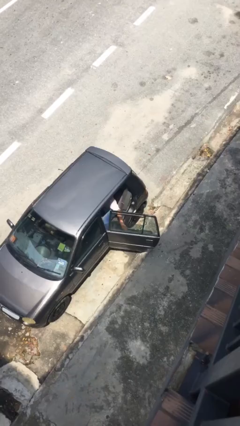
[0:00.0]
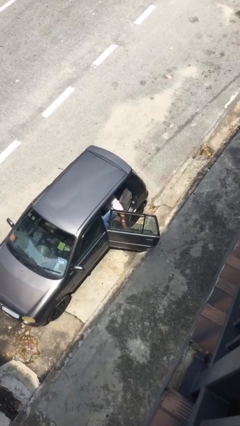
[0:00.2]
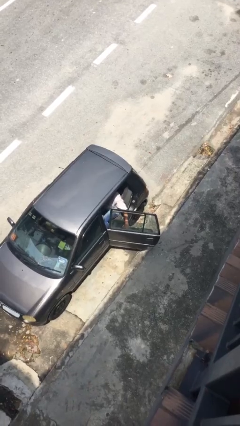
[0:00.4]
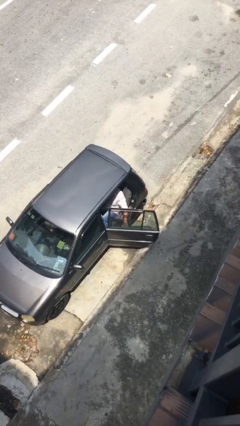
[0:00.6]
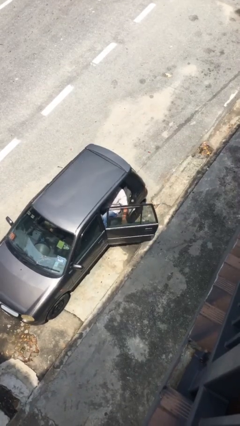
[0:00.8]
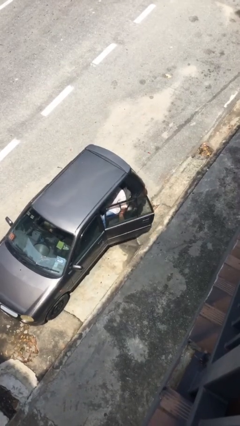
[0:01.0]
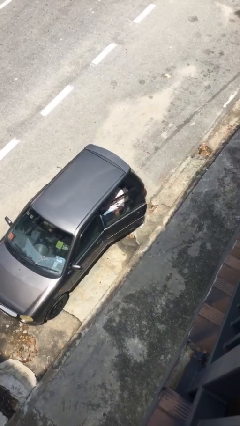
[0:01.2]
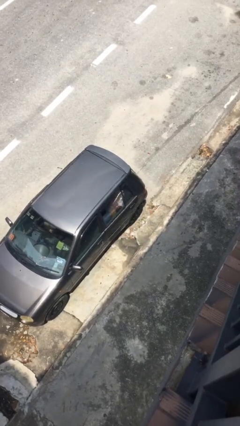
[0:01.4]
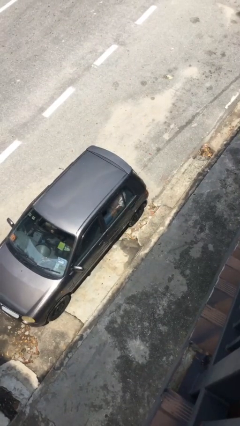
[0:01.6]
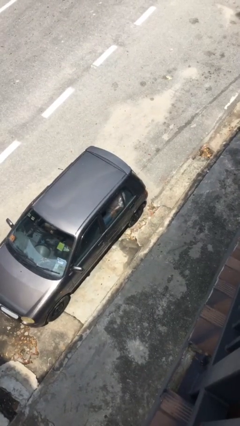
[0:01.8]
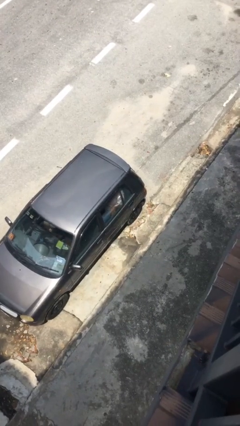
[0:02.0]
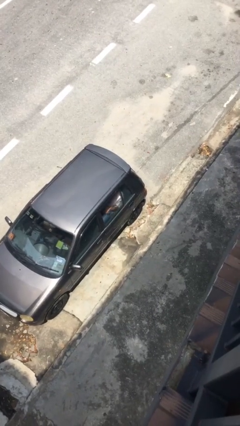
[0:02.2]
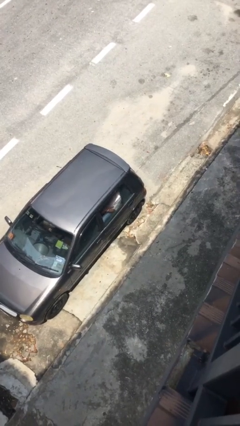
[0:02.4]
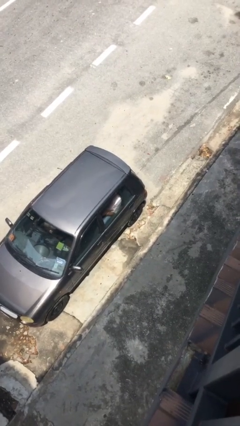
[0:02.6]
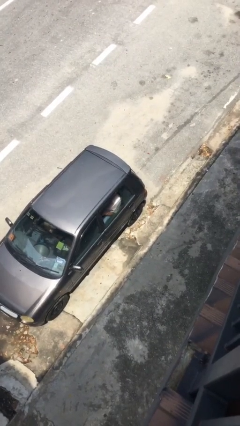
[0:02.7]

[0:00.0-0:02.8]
person closes car door

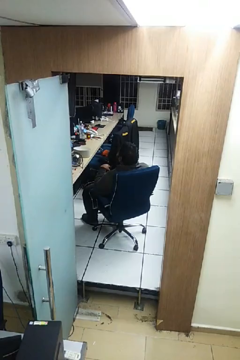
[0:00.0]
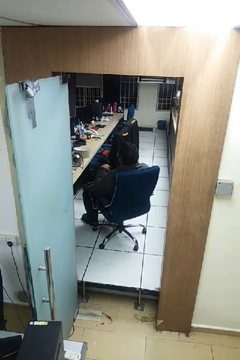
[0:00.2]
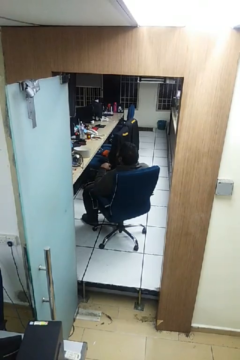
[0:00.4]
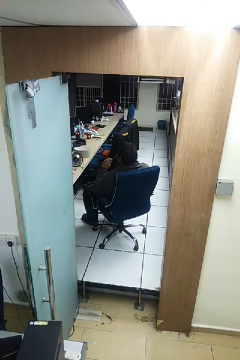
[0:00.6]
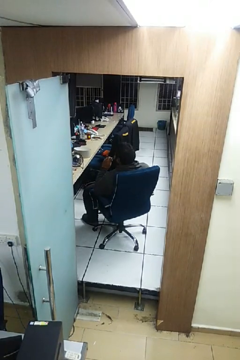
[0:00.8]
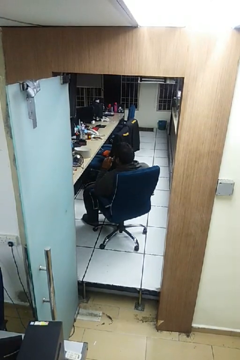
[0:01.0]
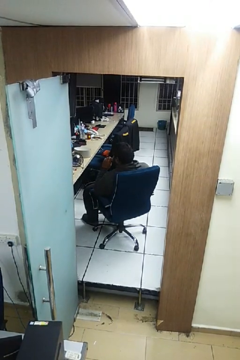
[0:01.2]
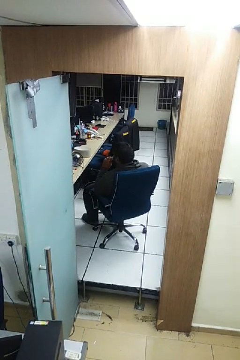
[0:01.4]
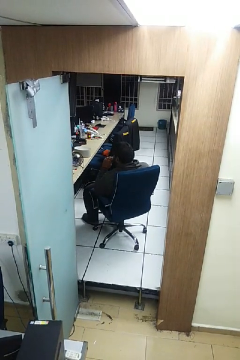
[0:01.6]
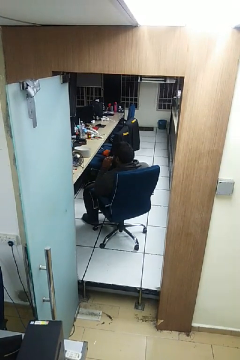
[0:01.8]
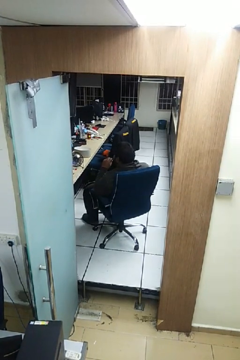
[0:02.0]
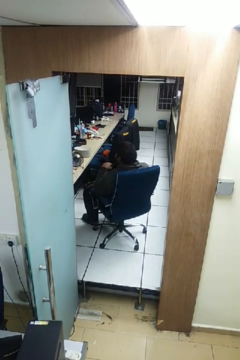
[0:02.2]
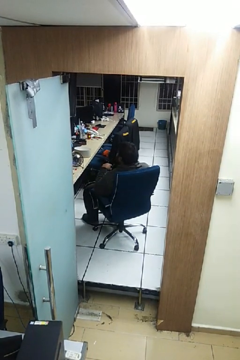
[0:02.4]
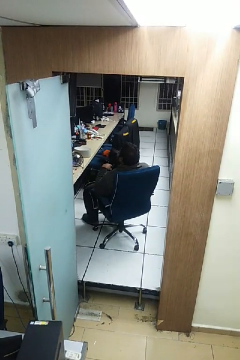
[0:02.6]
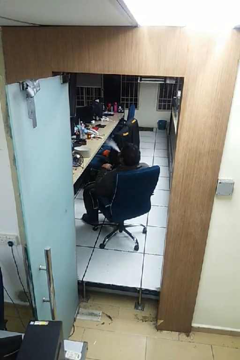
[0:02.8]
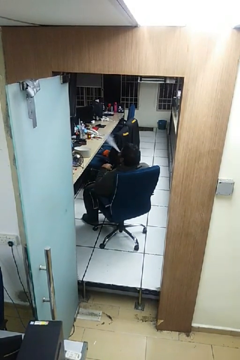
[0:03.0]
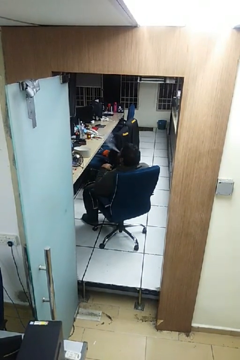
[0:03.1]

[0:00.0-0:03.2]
person vapes

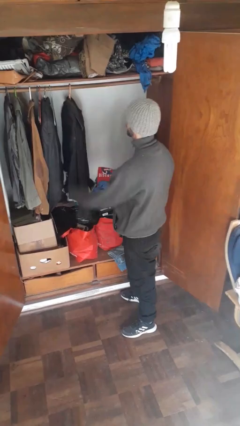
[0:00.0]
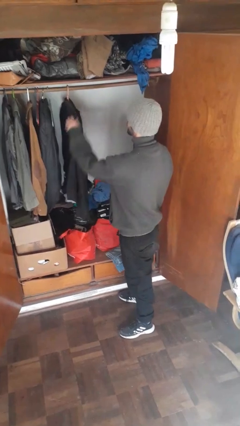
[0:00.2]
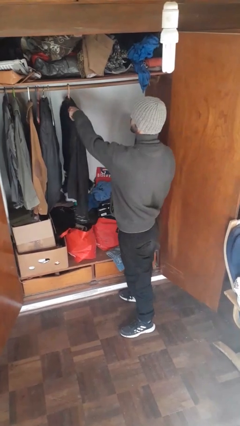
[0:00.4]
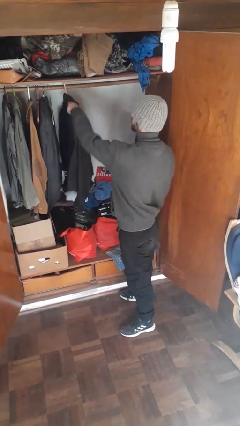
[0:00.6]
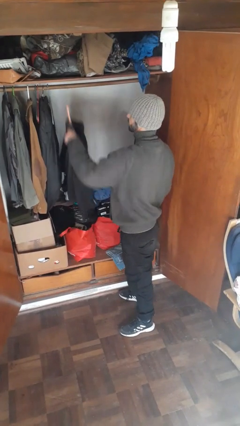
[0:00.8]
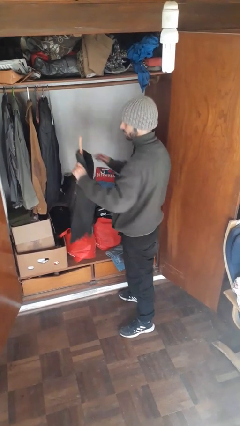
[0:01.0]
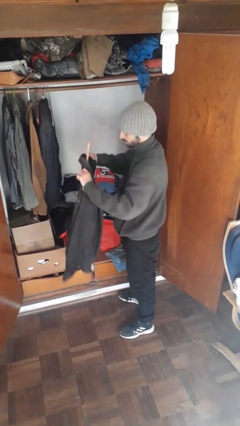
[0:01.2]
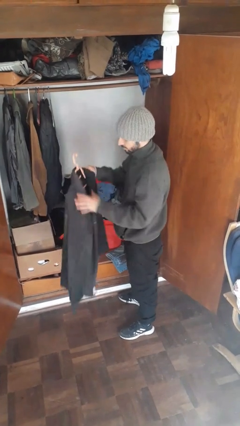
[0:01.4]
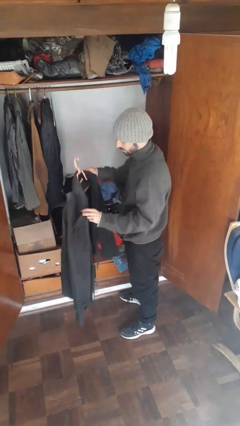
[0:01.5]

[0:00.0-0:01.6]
person takes clothes from closet

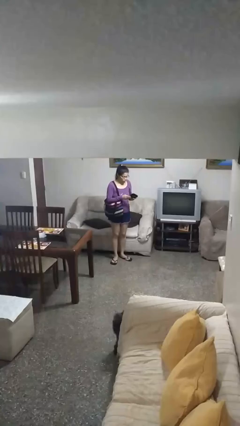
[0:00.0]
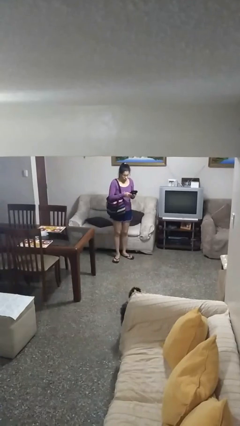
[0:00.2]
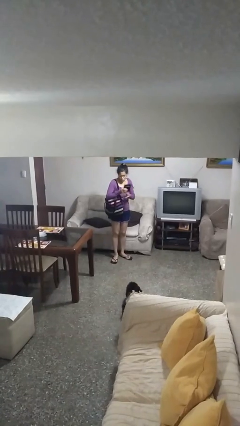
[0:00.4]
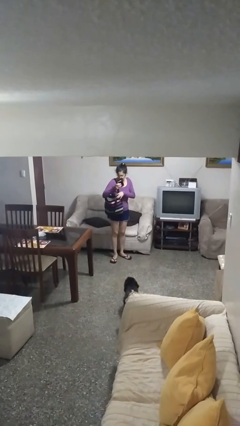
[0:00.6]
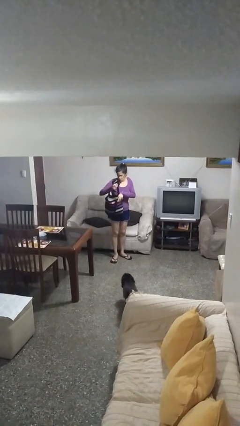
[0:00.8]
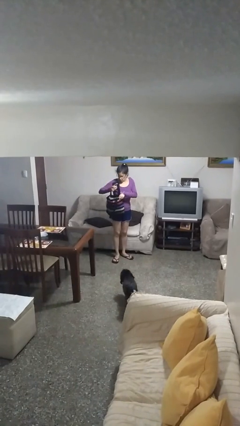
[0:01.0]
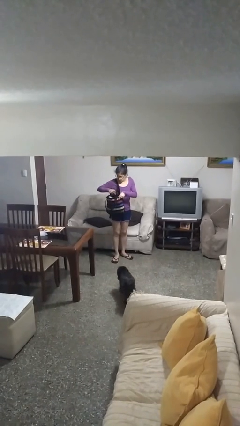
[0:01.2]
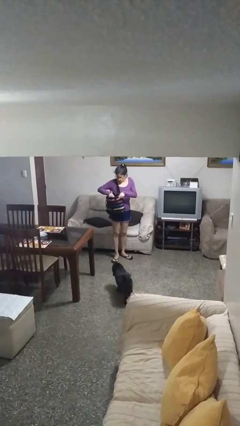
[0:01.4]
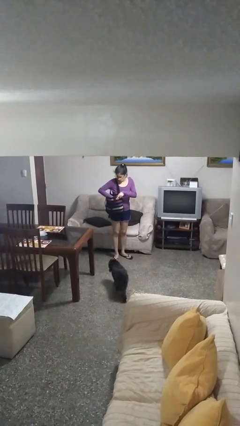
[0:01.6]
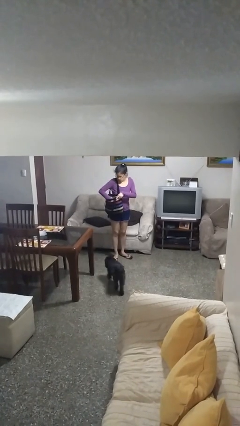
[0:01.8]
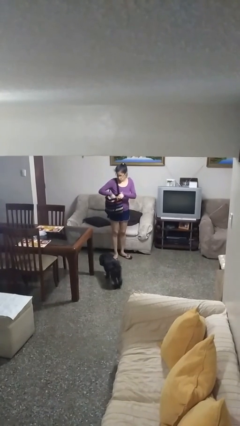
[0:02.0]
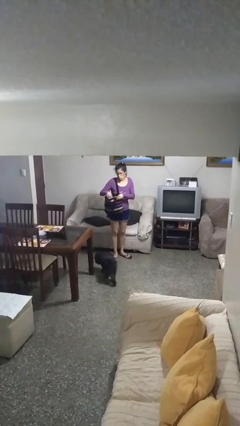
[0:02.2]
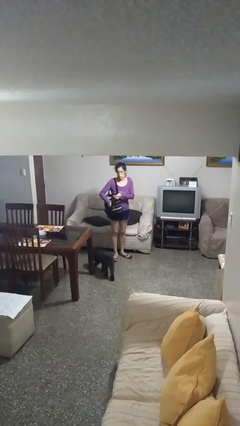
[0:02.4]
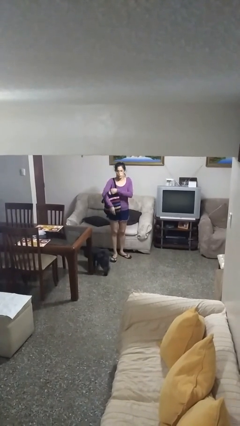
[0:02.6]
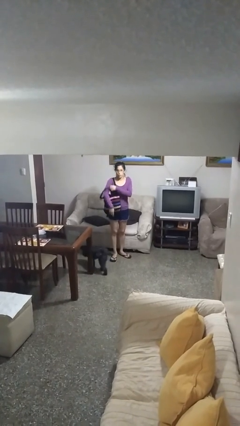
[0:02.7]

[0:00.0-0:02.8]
person puts object into purse

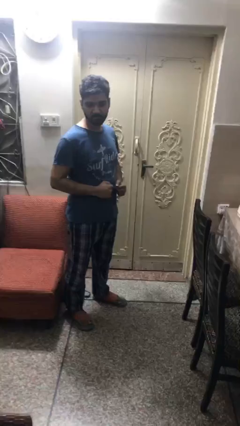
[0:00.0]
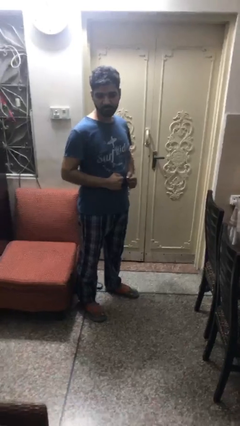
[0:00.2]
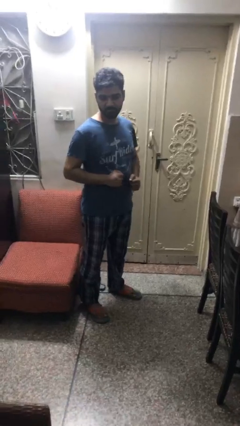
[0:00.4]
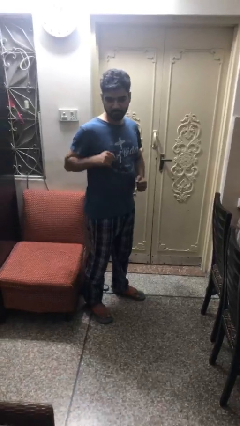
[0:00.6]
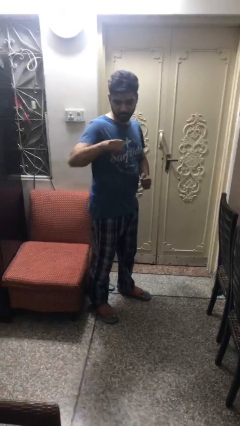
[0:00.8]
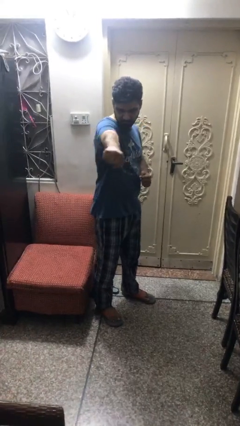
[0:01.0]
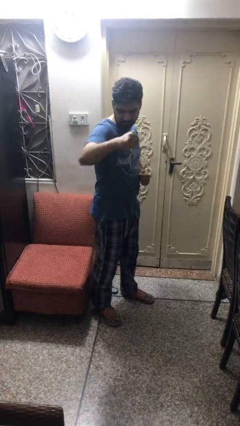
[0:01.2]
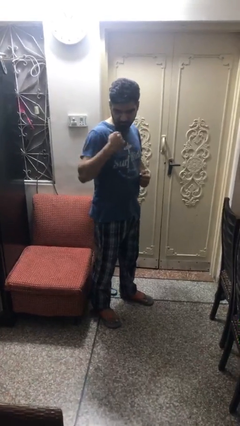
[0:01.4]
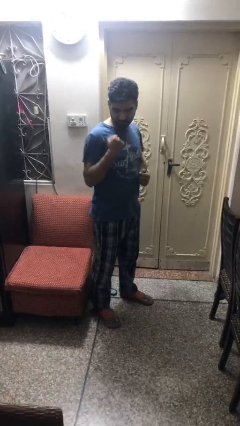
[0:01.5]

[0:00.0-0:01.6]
person karate chop

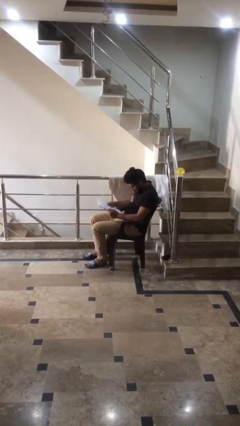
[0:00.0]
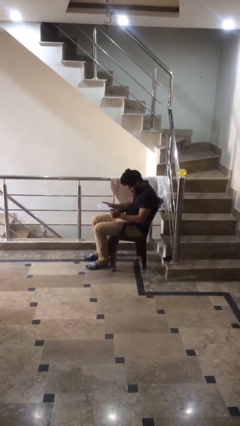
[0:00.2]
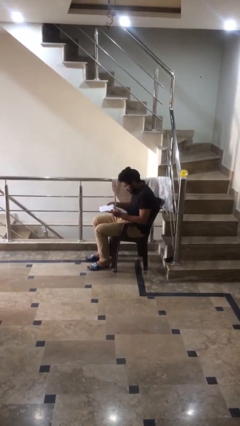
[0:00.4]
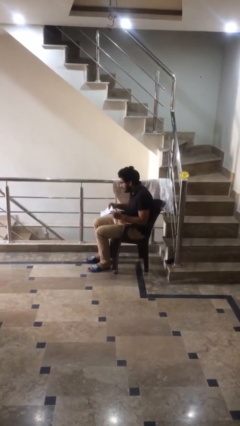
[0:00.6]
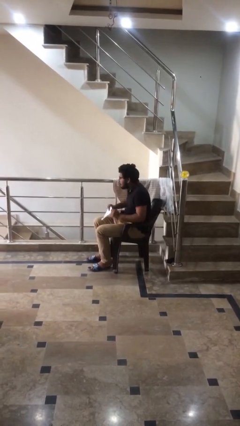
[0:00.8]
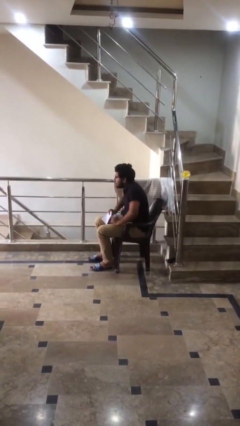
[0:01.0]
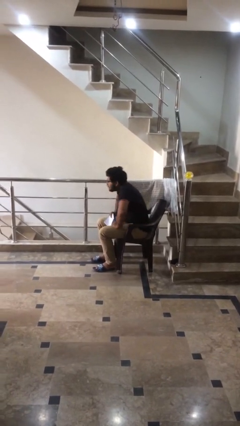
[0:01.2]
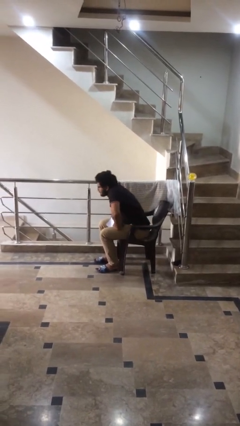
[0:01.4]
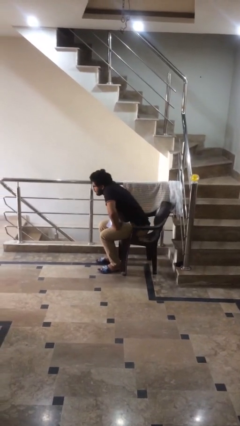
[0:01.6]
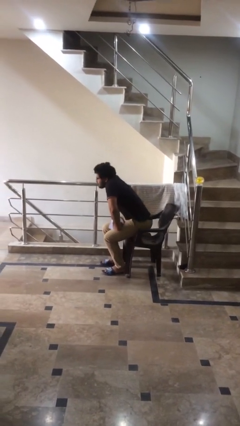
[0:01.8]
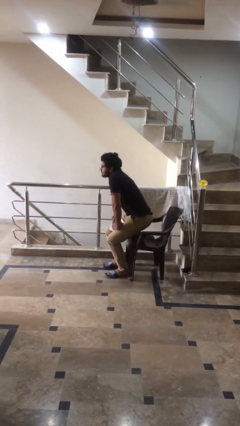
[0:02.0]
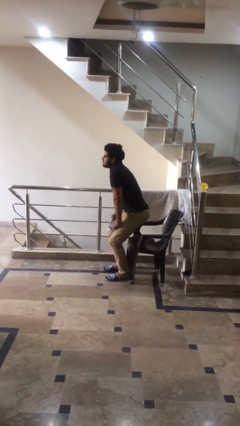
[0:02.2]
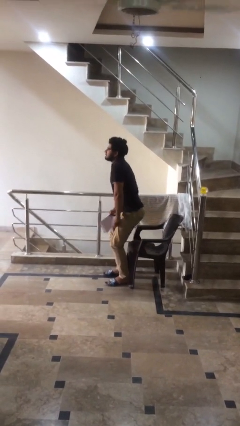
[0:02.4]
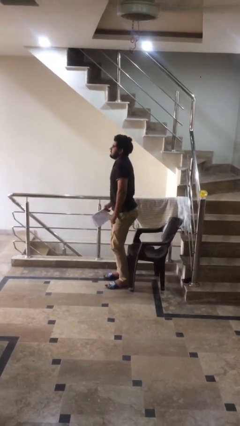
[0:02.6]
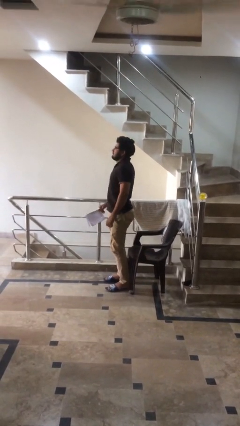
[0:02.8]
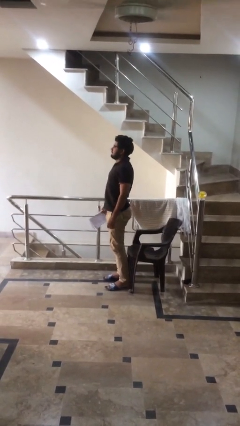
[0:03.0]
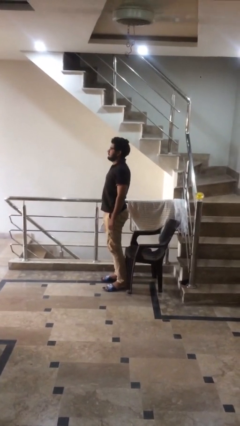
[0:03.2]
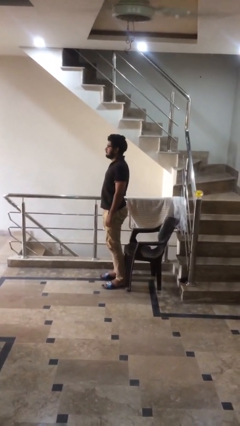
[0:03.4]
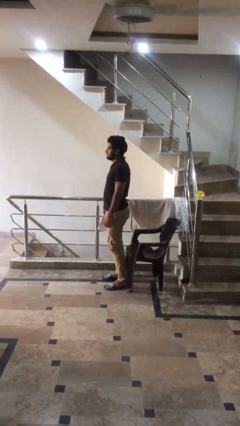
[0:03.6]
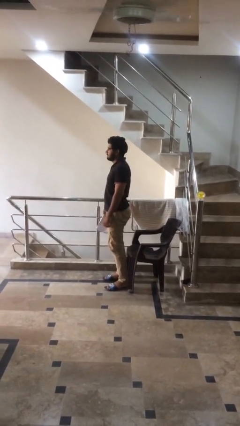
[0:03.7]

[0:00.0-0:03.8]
person stands up

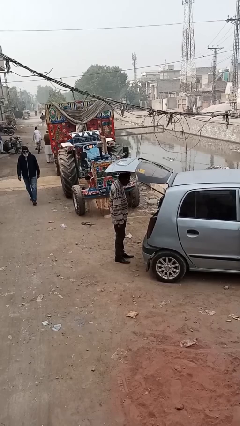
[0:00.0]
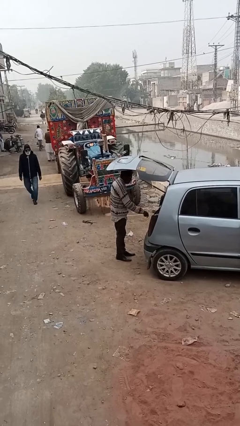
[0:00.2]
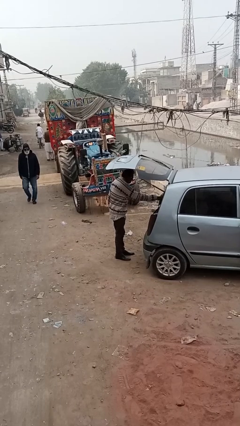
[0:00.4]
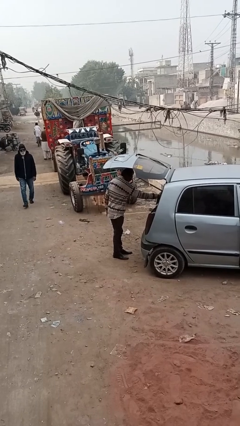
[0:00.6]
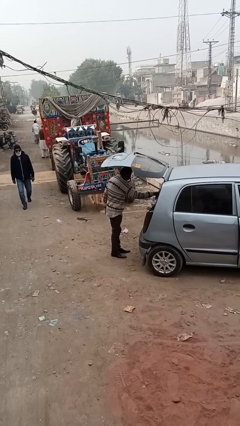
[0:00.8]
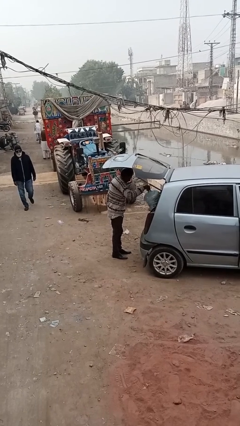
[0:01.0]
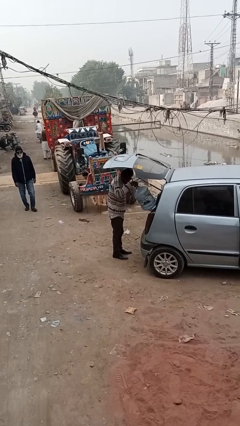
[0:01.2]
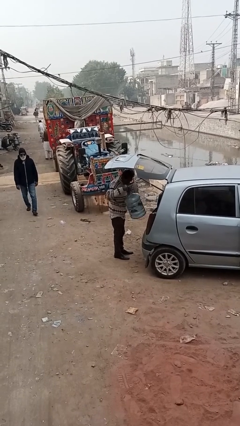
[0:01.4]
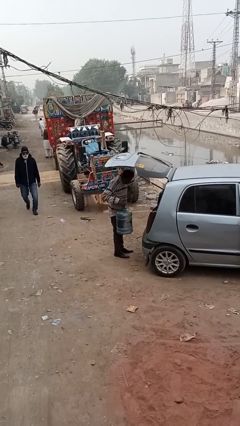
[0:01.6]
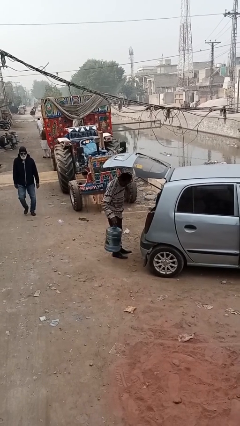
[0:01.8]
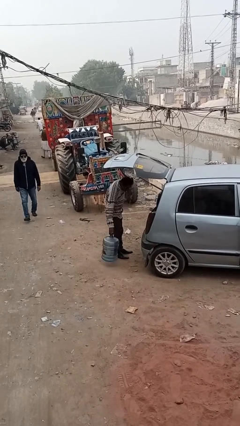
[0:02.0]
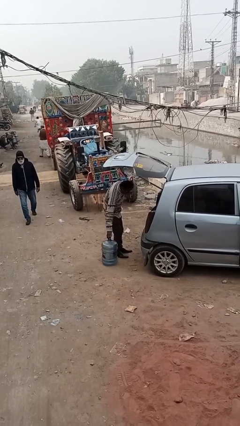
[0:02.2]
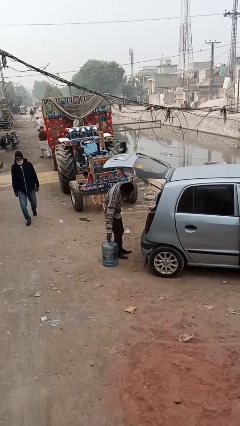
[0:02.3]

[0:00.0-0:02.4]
person unloads car
